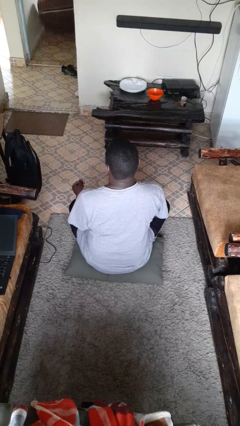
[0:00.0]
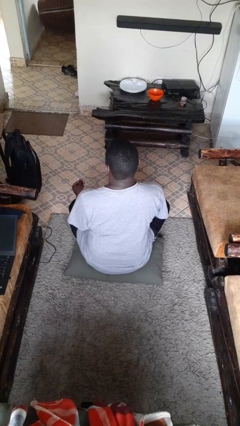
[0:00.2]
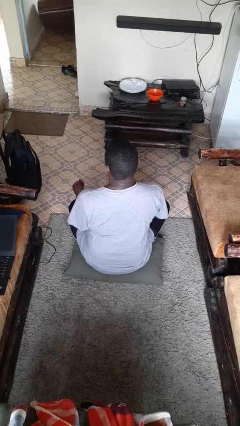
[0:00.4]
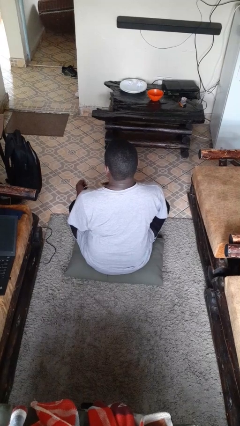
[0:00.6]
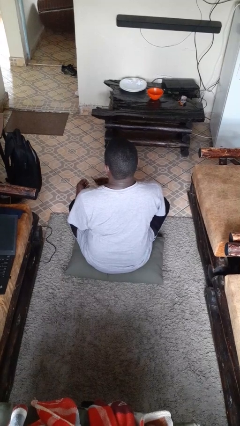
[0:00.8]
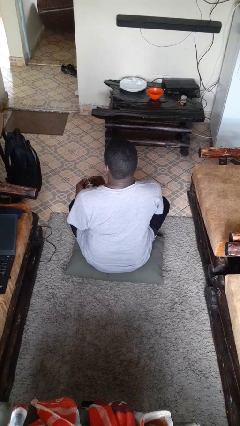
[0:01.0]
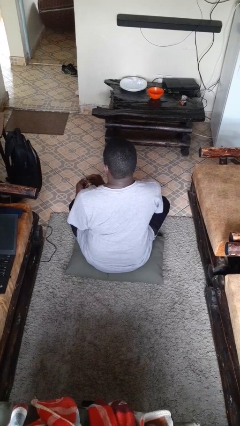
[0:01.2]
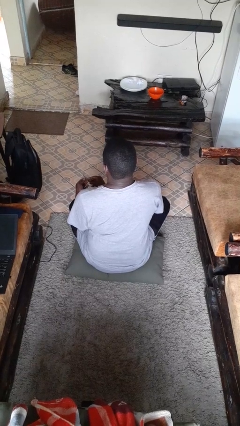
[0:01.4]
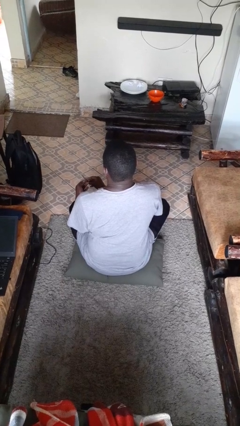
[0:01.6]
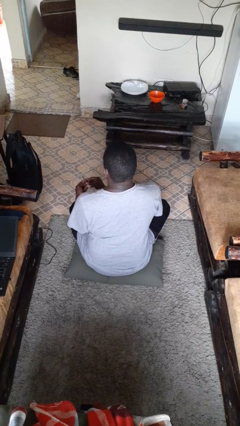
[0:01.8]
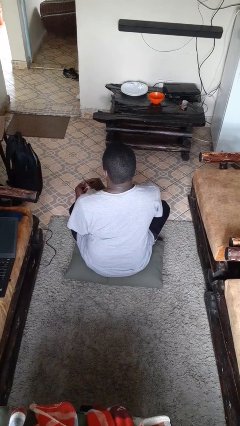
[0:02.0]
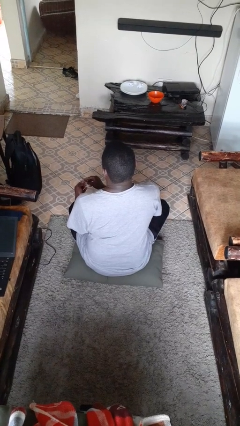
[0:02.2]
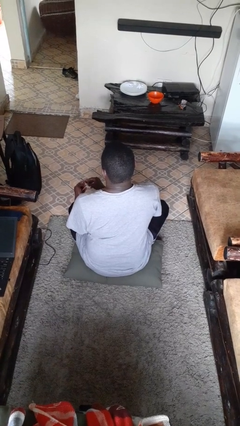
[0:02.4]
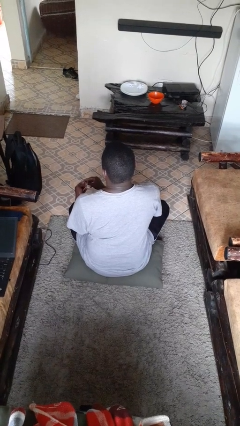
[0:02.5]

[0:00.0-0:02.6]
person files fingernails

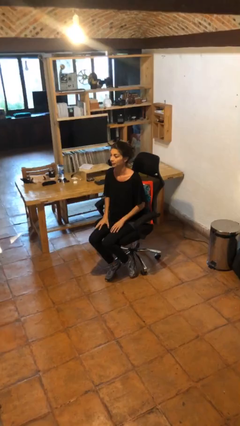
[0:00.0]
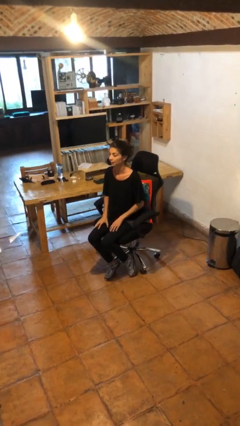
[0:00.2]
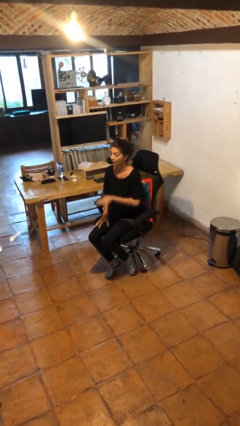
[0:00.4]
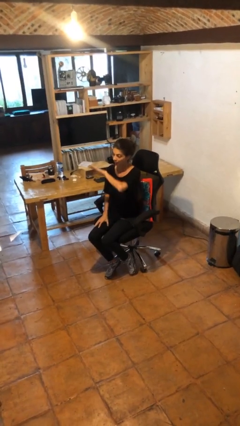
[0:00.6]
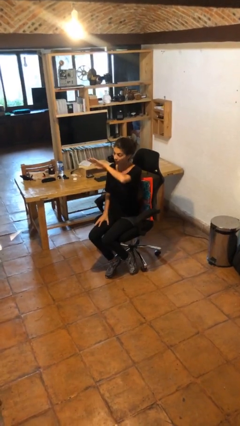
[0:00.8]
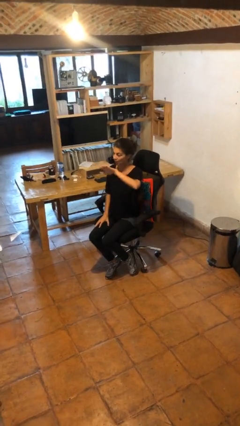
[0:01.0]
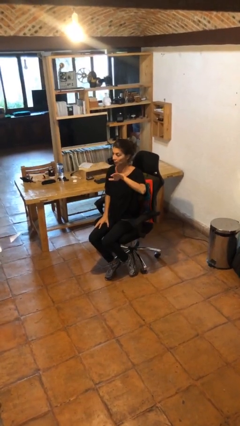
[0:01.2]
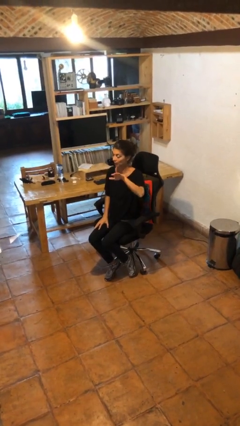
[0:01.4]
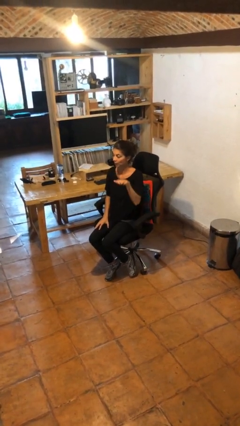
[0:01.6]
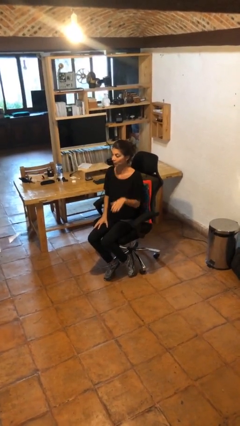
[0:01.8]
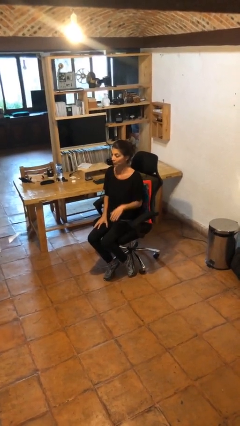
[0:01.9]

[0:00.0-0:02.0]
person gestures swipe left

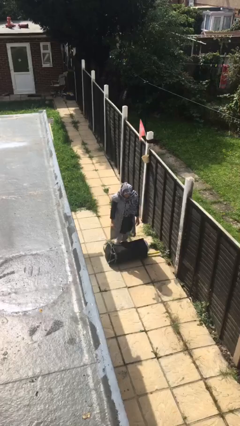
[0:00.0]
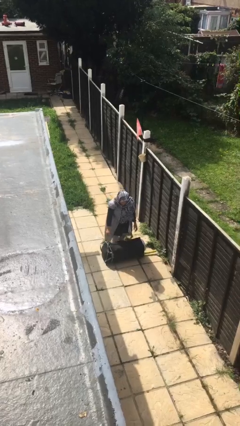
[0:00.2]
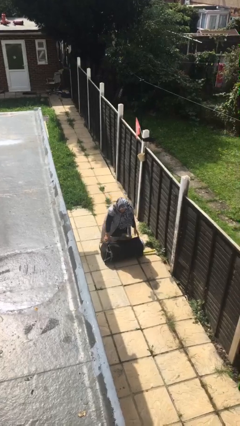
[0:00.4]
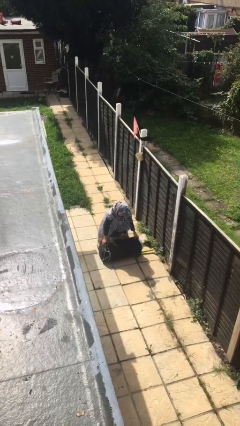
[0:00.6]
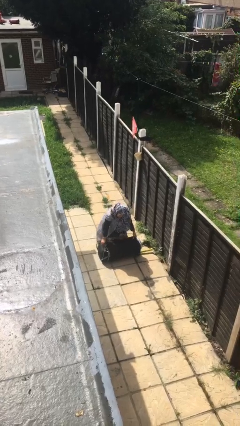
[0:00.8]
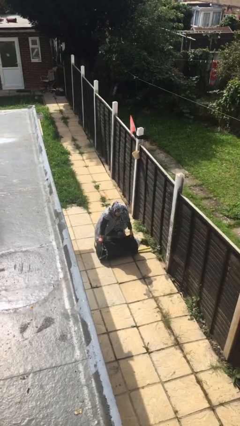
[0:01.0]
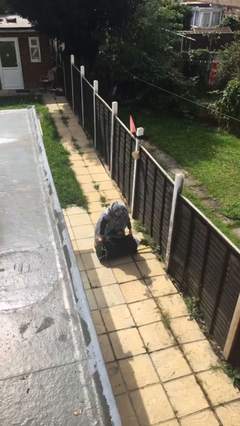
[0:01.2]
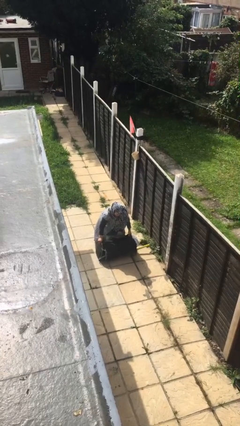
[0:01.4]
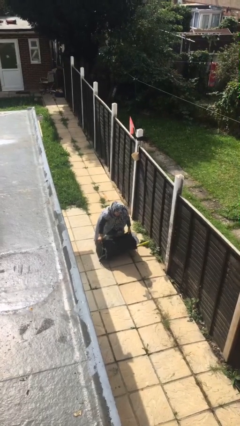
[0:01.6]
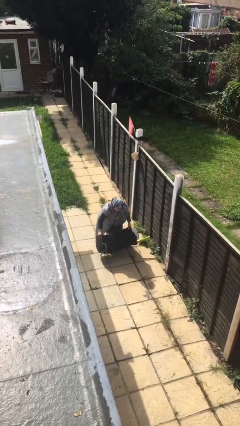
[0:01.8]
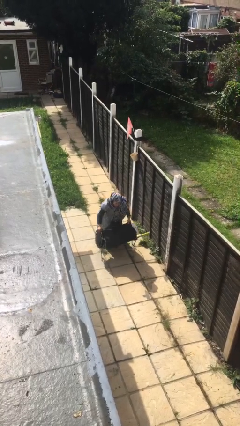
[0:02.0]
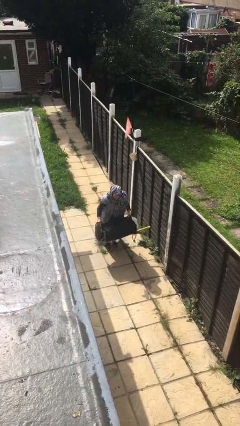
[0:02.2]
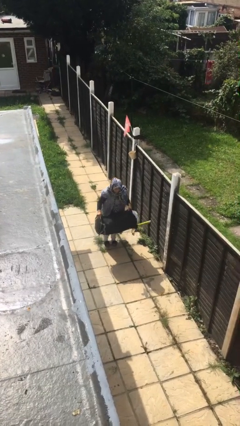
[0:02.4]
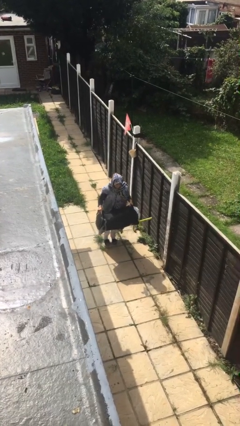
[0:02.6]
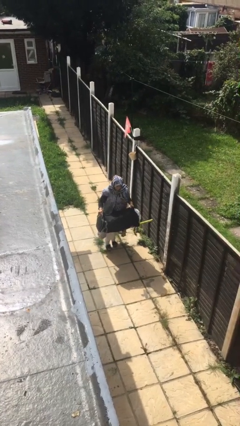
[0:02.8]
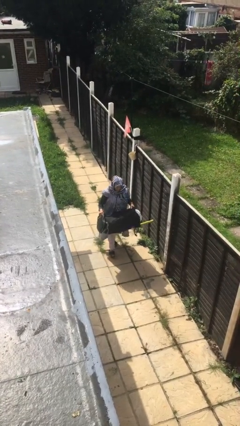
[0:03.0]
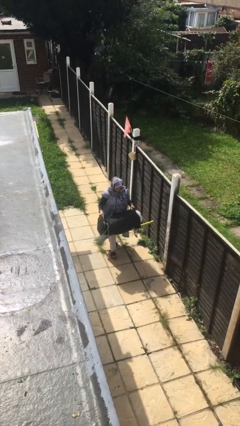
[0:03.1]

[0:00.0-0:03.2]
person picks up object from floor

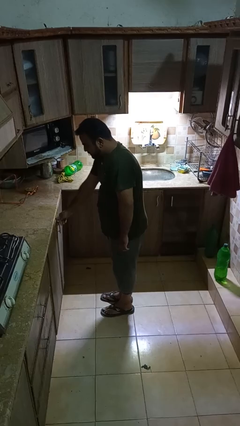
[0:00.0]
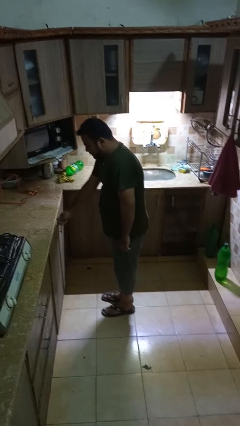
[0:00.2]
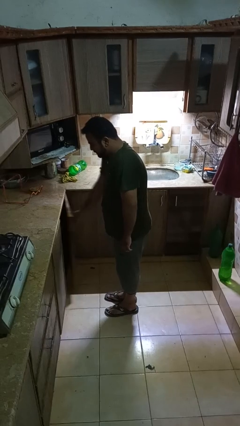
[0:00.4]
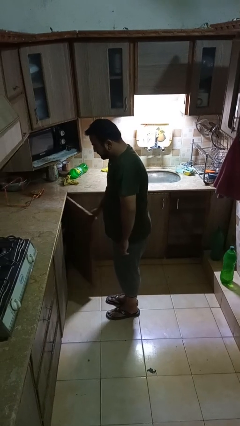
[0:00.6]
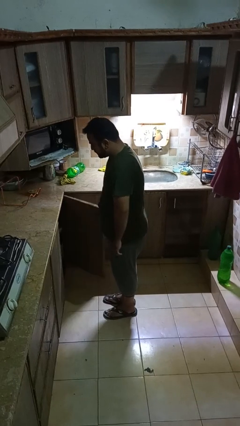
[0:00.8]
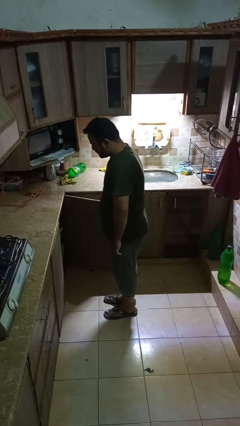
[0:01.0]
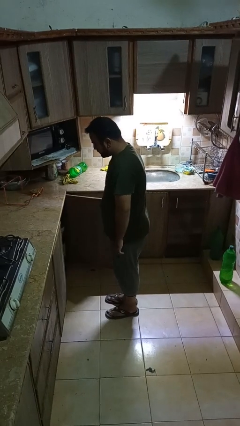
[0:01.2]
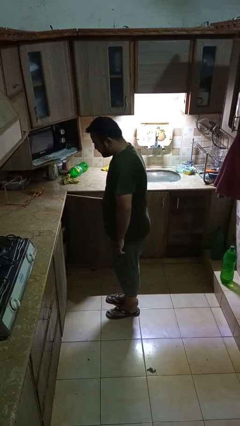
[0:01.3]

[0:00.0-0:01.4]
person opens cabinet

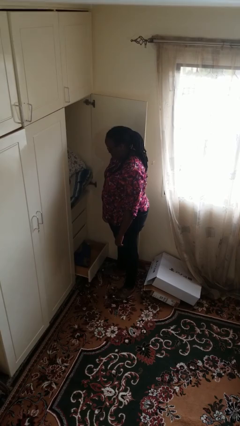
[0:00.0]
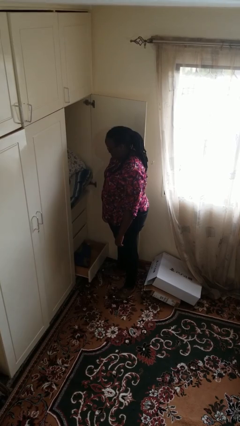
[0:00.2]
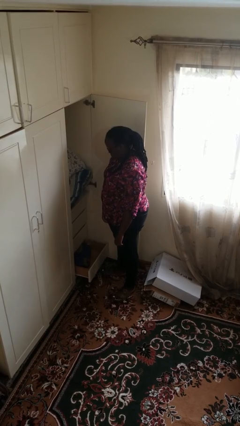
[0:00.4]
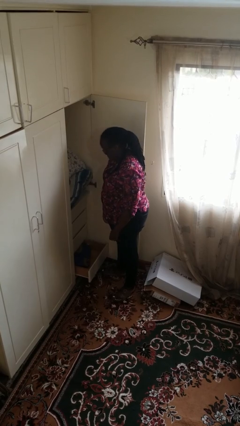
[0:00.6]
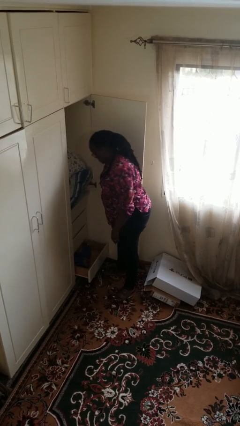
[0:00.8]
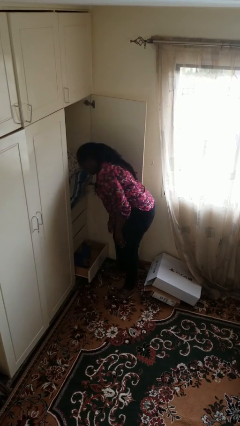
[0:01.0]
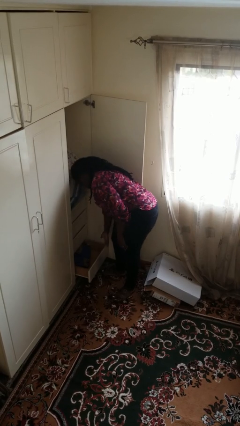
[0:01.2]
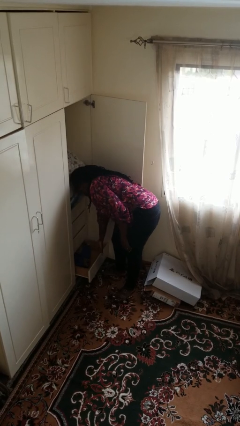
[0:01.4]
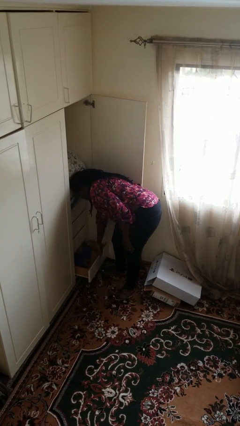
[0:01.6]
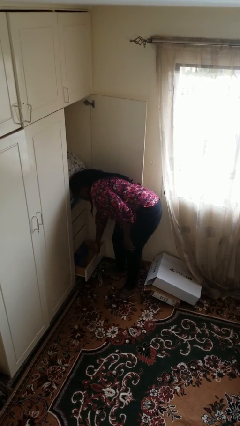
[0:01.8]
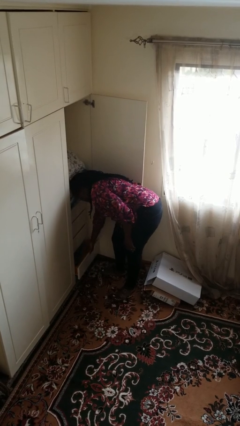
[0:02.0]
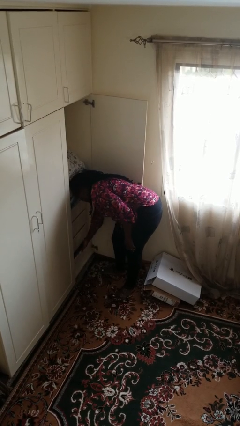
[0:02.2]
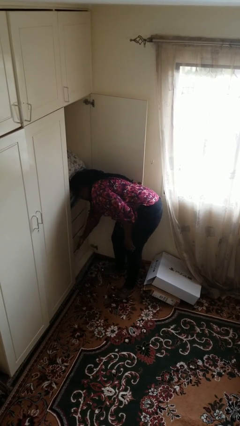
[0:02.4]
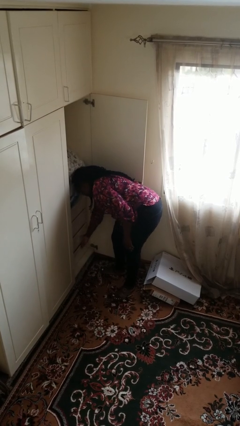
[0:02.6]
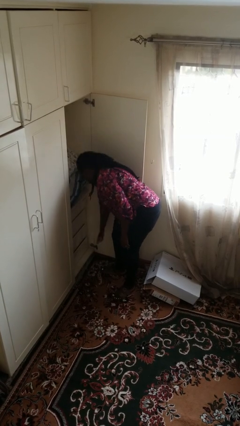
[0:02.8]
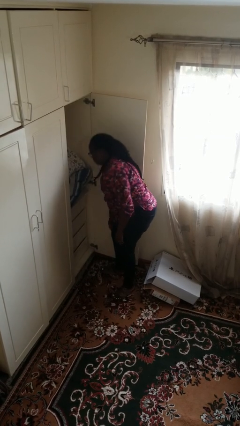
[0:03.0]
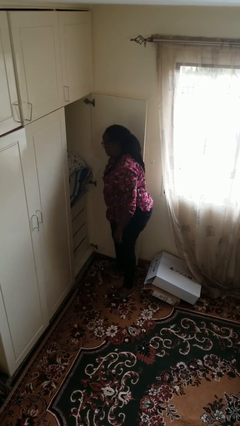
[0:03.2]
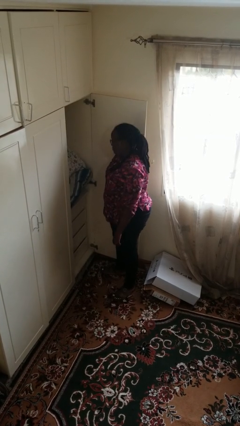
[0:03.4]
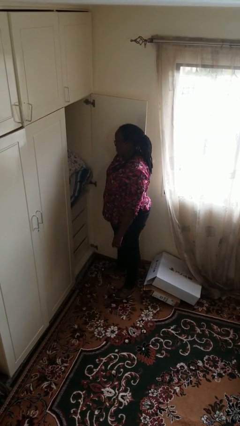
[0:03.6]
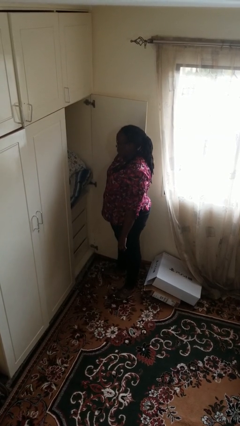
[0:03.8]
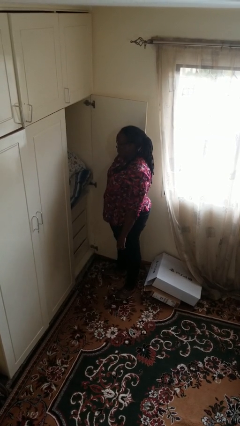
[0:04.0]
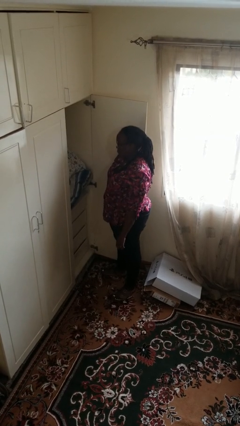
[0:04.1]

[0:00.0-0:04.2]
person closes dresser drawer

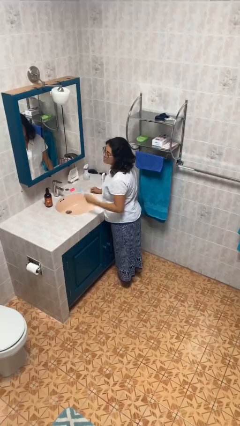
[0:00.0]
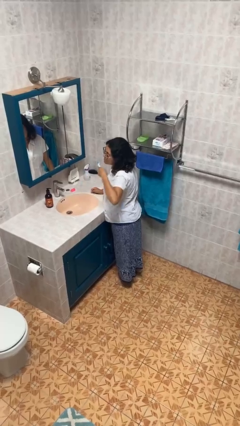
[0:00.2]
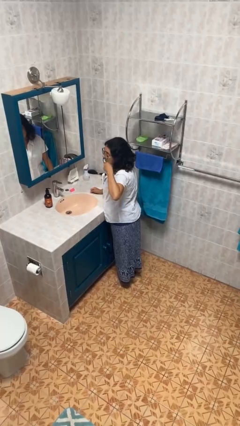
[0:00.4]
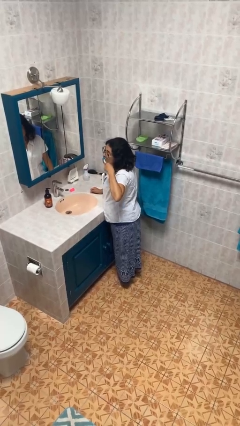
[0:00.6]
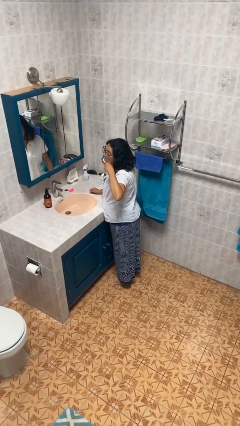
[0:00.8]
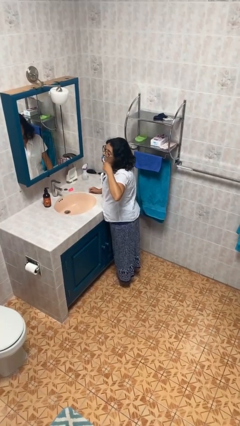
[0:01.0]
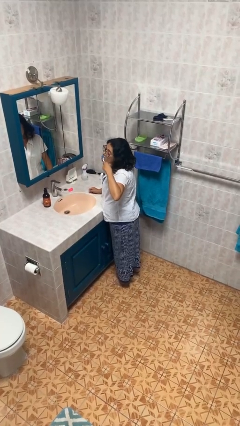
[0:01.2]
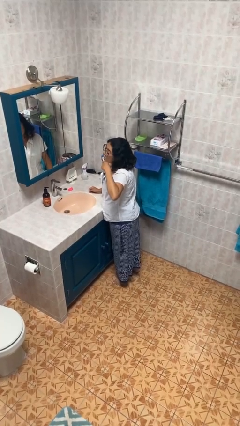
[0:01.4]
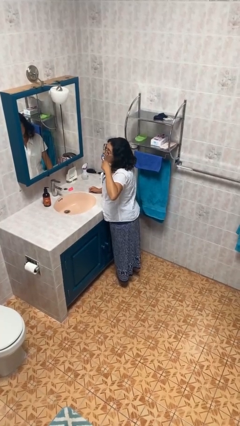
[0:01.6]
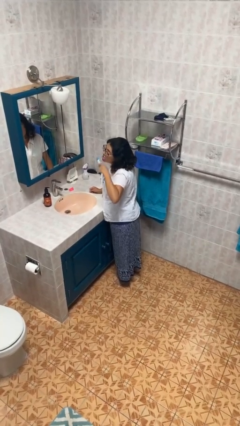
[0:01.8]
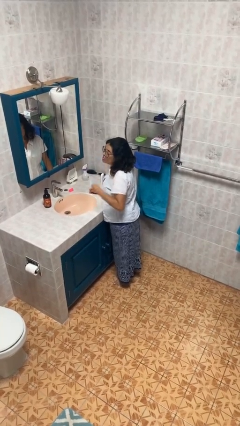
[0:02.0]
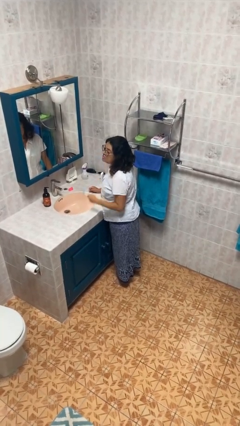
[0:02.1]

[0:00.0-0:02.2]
person brushes teeth

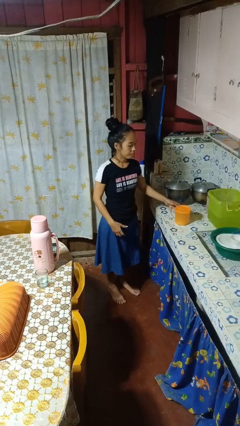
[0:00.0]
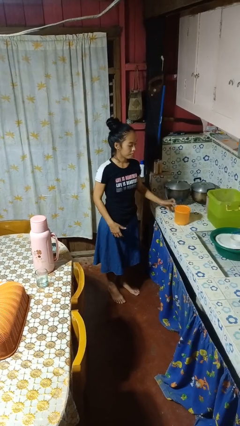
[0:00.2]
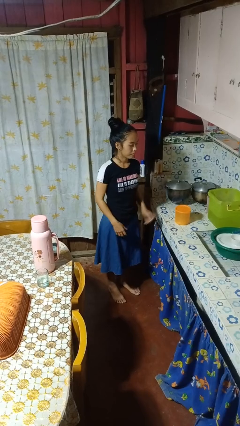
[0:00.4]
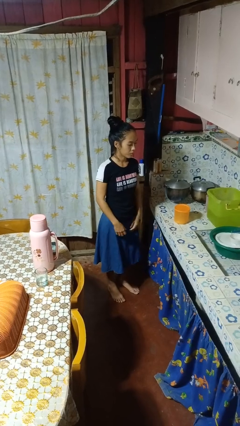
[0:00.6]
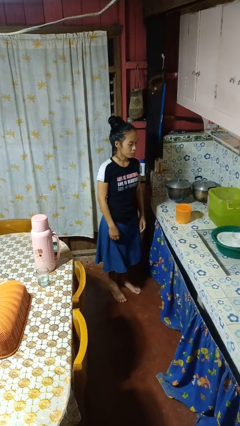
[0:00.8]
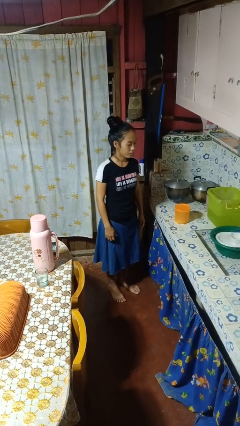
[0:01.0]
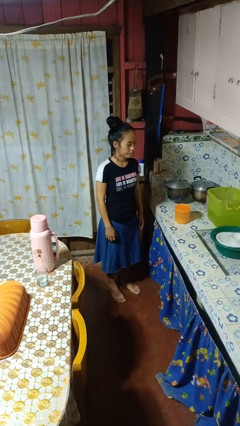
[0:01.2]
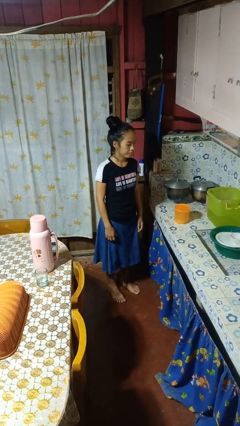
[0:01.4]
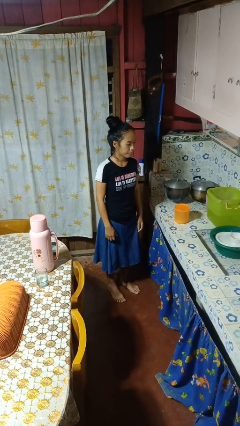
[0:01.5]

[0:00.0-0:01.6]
person puts down object on countertop
